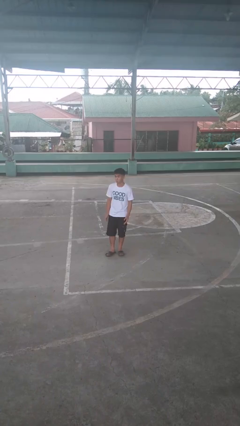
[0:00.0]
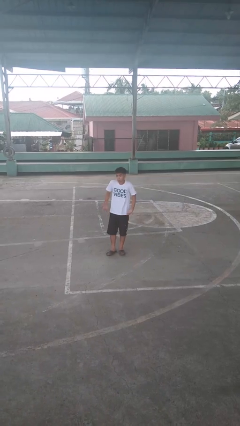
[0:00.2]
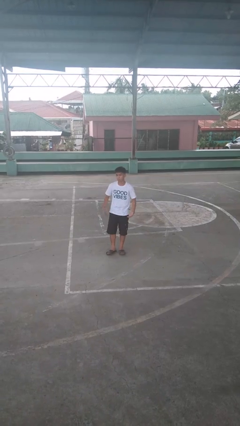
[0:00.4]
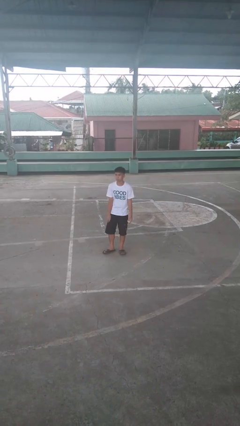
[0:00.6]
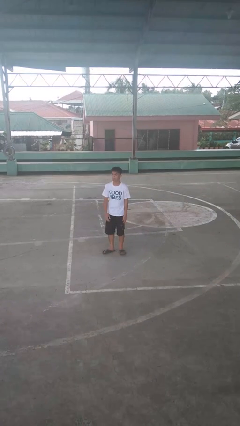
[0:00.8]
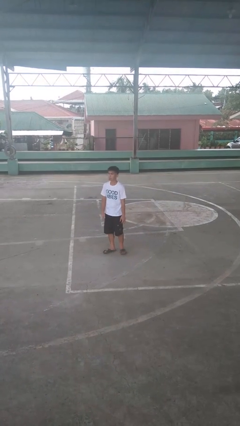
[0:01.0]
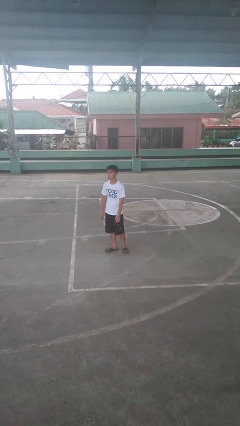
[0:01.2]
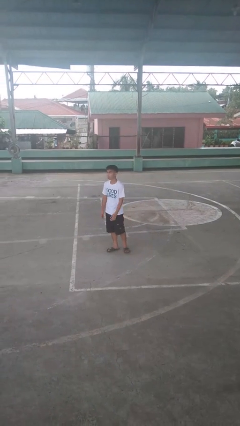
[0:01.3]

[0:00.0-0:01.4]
person shrugs

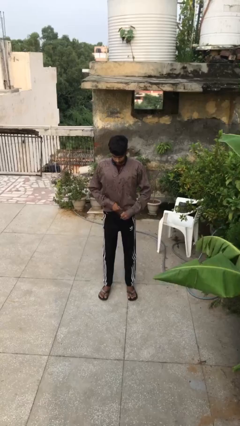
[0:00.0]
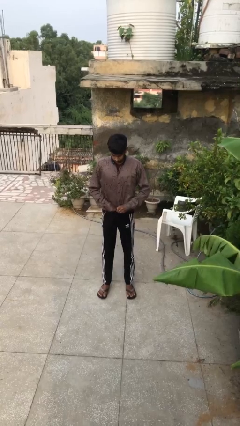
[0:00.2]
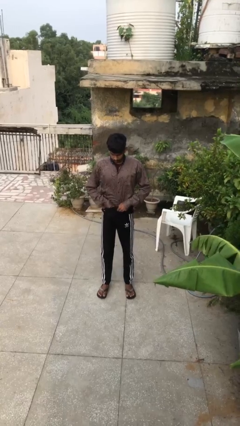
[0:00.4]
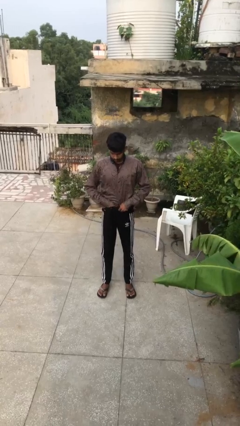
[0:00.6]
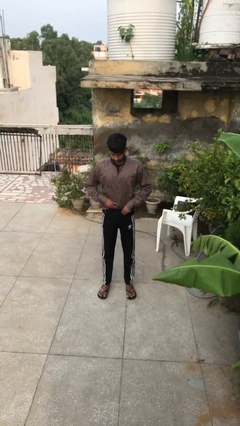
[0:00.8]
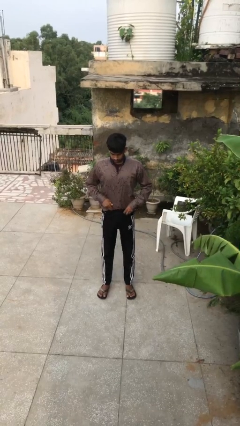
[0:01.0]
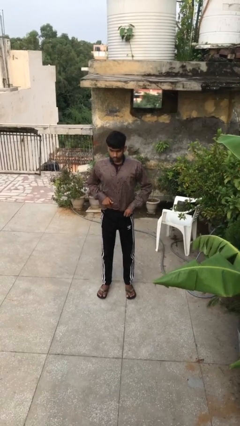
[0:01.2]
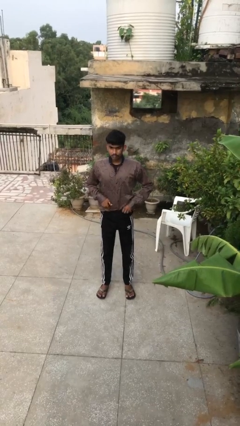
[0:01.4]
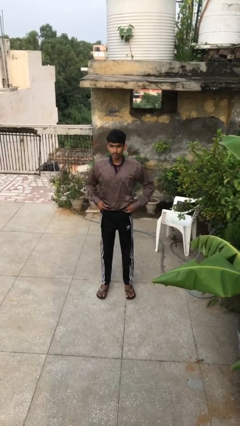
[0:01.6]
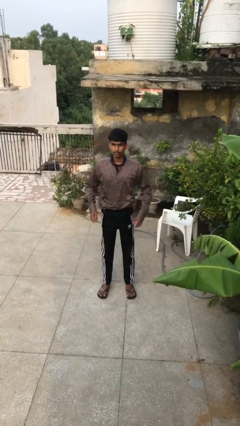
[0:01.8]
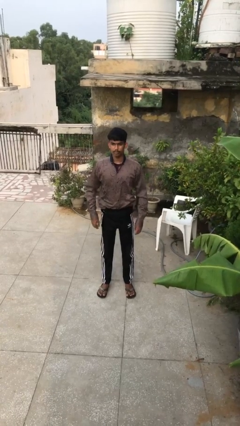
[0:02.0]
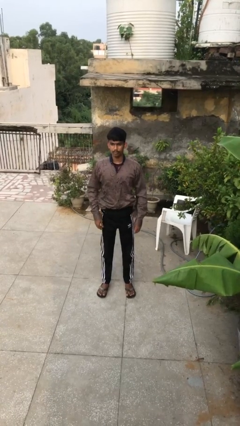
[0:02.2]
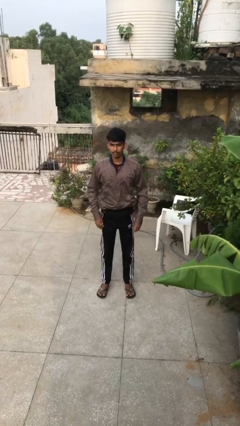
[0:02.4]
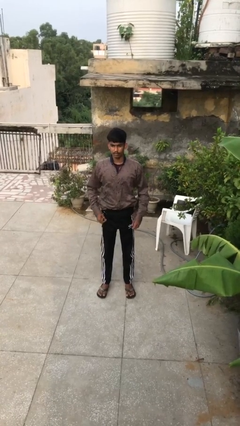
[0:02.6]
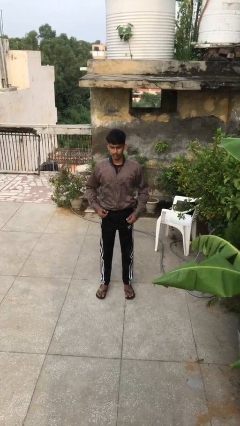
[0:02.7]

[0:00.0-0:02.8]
person tucks in shirt

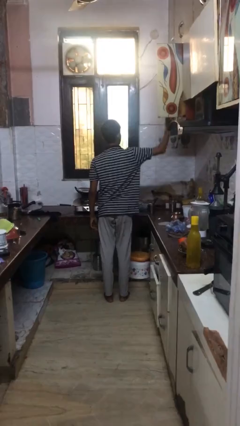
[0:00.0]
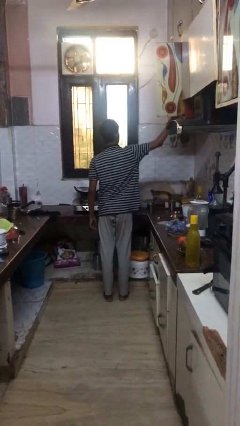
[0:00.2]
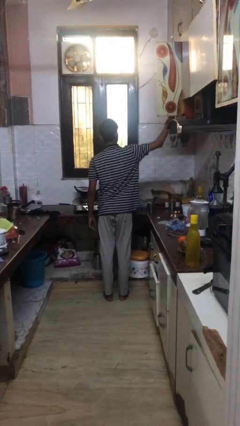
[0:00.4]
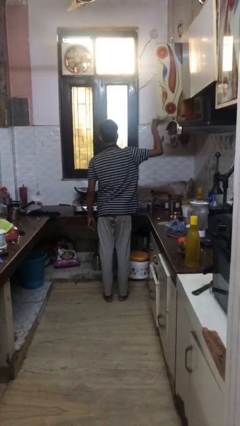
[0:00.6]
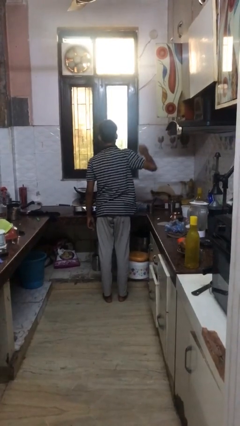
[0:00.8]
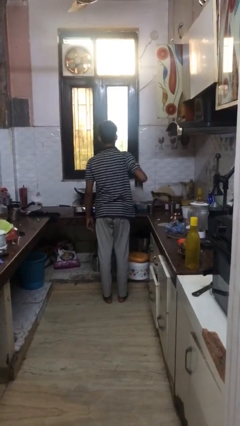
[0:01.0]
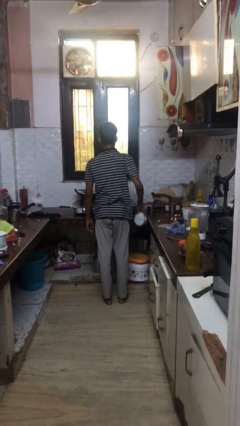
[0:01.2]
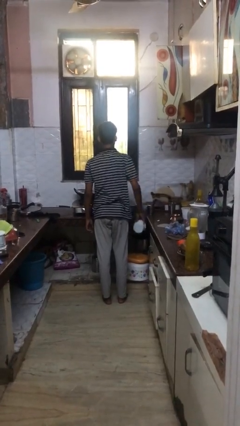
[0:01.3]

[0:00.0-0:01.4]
person puts object in cabinet

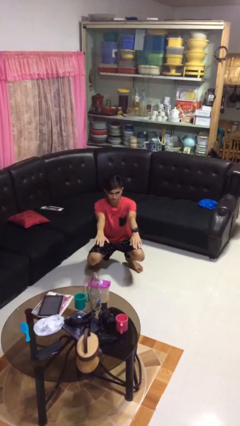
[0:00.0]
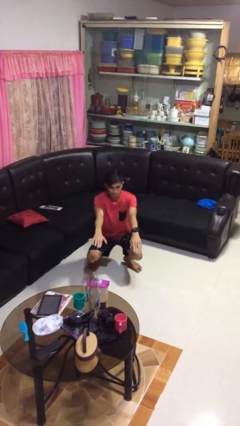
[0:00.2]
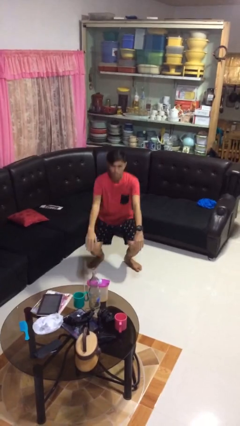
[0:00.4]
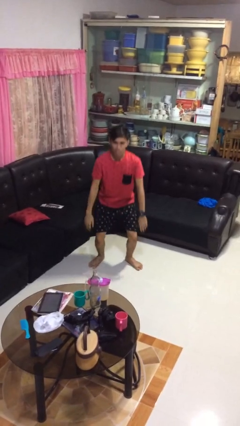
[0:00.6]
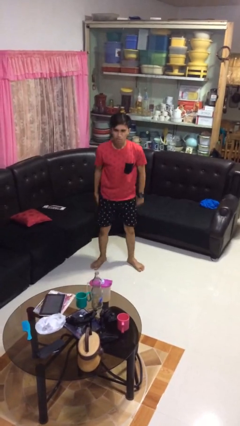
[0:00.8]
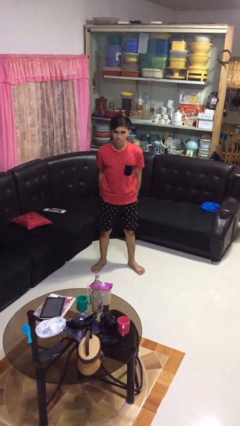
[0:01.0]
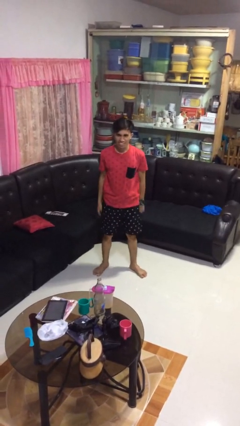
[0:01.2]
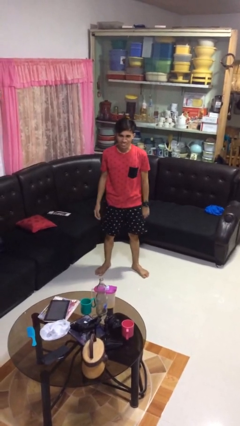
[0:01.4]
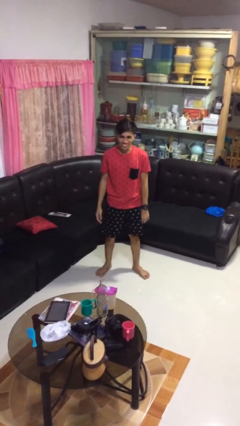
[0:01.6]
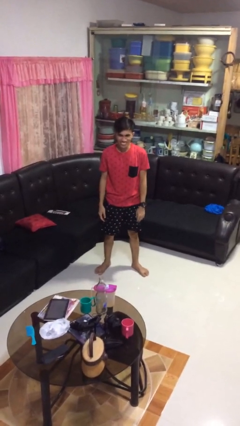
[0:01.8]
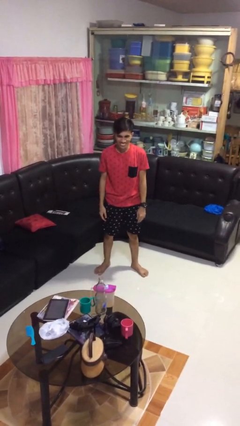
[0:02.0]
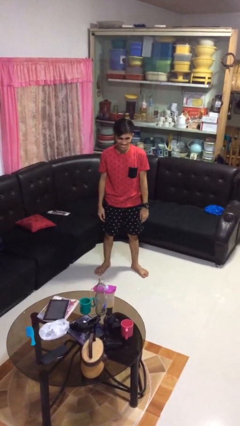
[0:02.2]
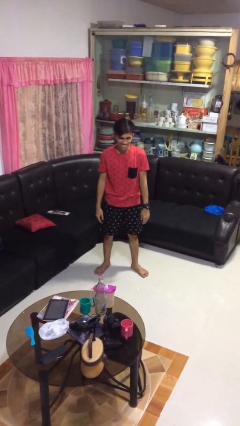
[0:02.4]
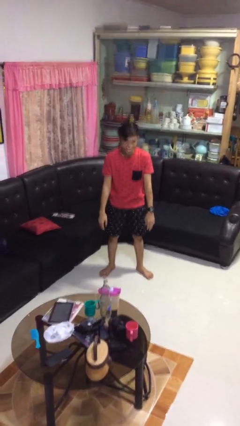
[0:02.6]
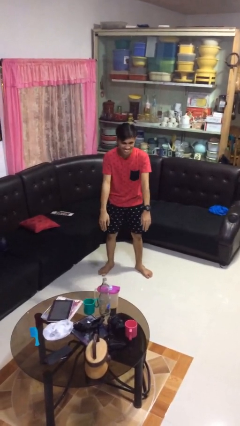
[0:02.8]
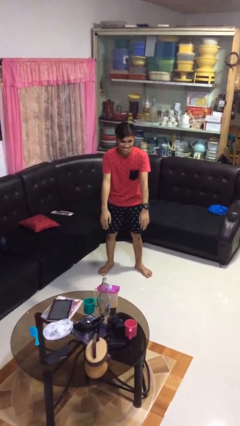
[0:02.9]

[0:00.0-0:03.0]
person stands up

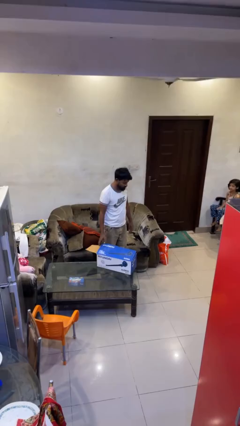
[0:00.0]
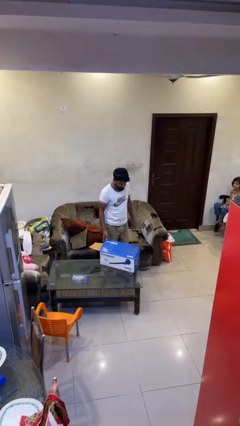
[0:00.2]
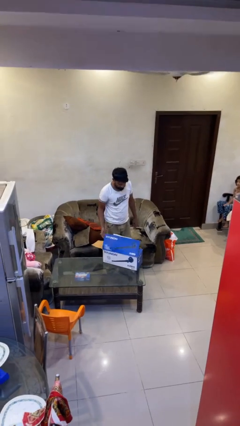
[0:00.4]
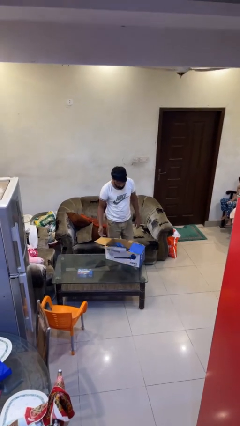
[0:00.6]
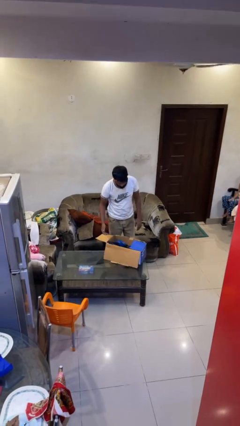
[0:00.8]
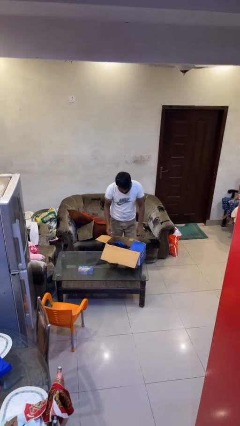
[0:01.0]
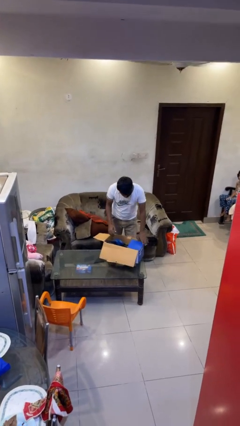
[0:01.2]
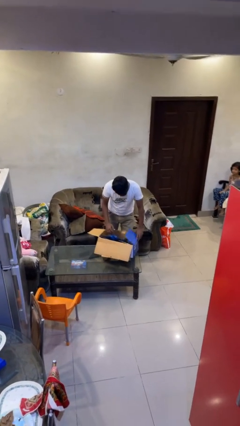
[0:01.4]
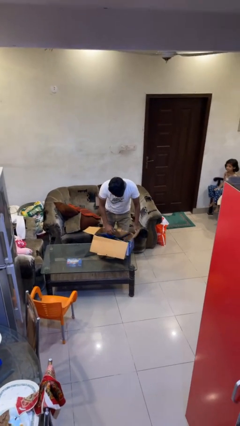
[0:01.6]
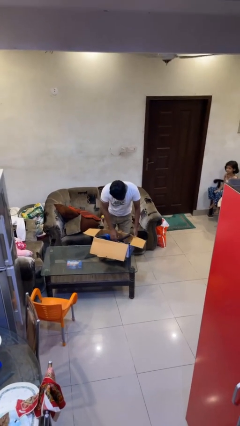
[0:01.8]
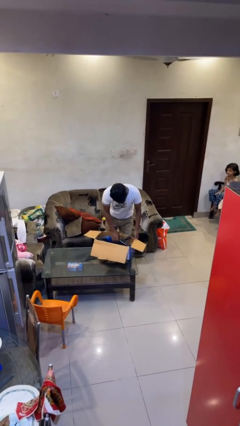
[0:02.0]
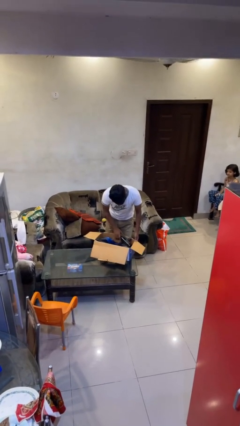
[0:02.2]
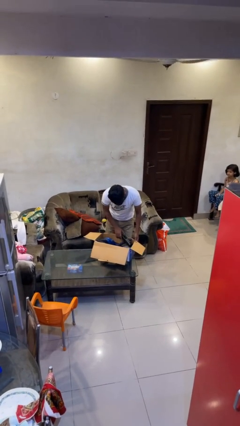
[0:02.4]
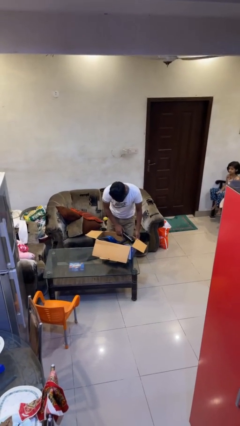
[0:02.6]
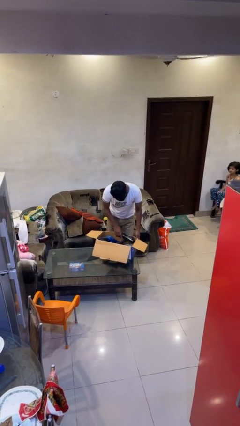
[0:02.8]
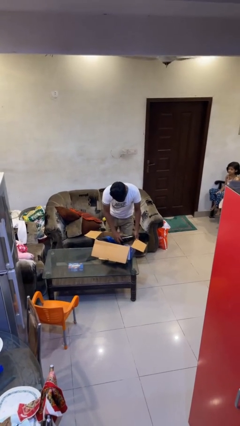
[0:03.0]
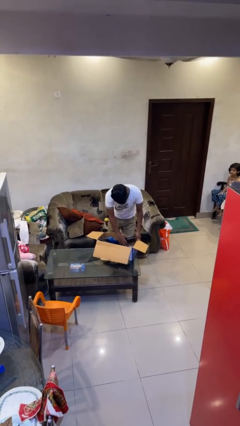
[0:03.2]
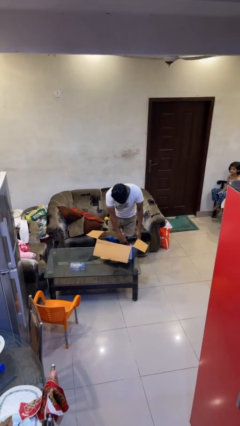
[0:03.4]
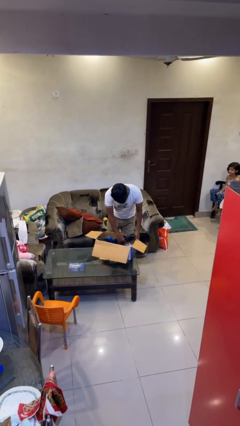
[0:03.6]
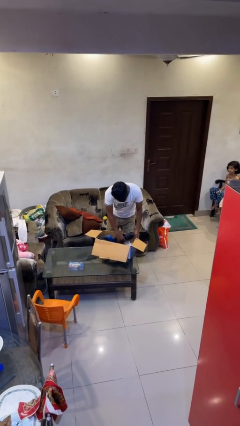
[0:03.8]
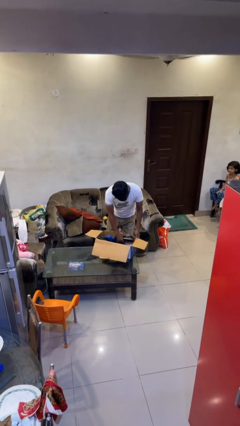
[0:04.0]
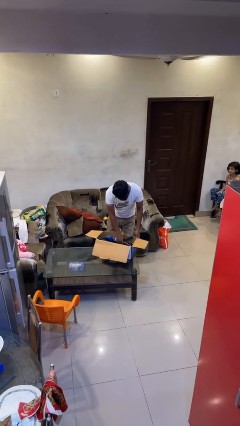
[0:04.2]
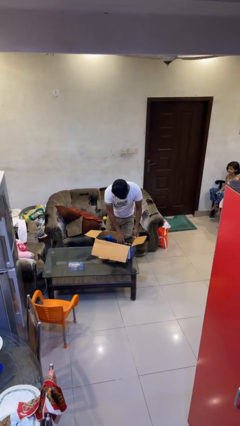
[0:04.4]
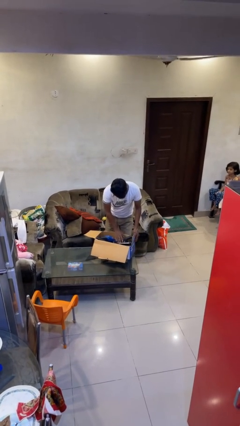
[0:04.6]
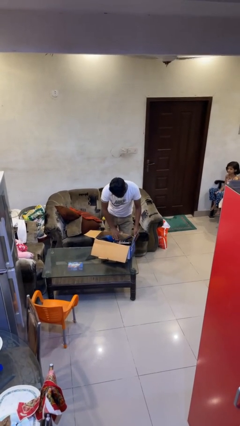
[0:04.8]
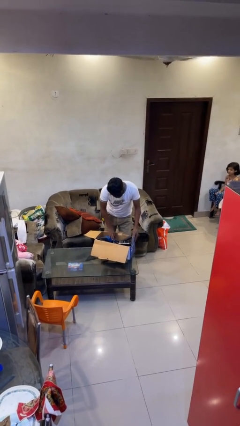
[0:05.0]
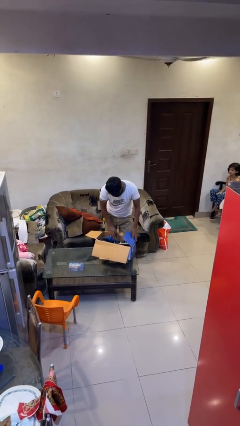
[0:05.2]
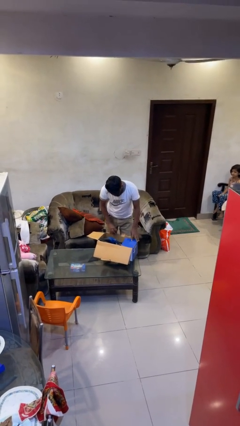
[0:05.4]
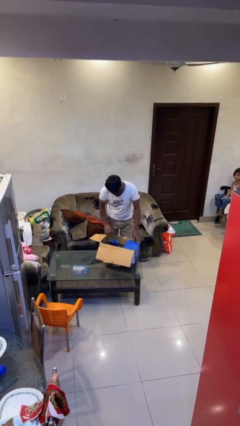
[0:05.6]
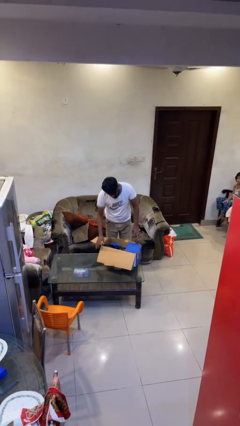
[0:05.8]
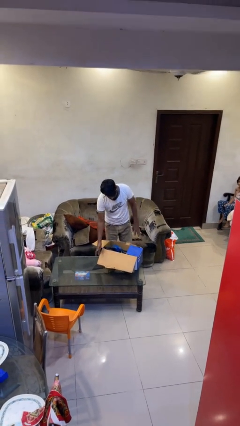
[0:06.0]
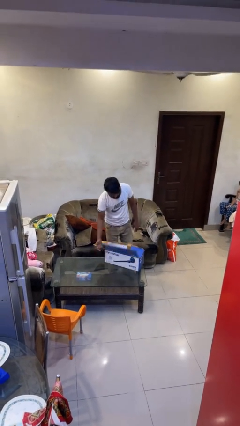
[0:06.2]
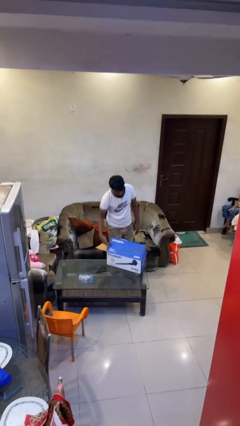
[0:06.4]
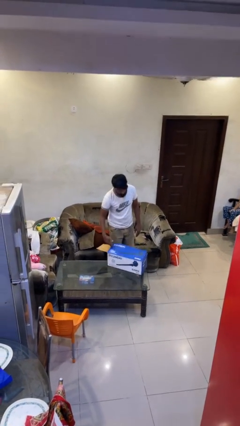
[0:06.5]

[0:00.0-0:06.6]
person searches in box

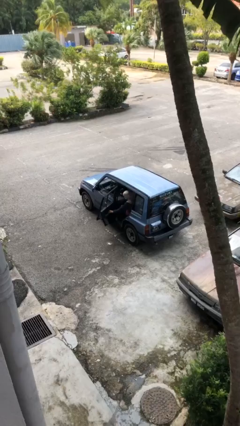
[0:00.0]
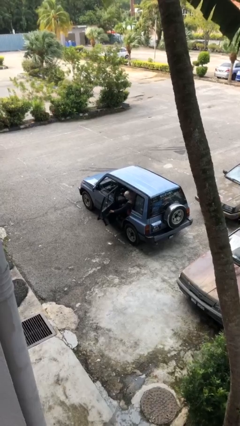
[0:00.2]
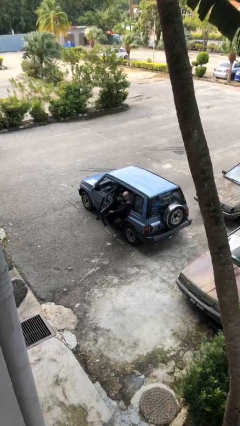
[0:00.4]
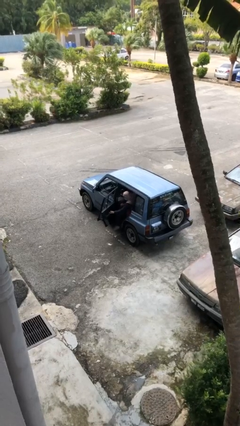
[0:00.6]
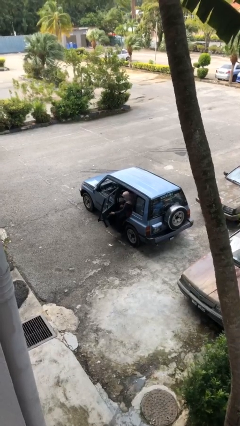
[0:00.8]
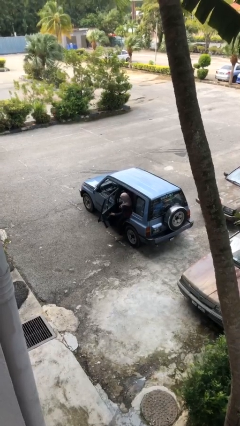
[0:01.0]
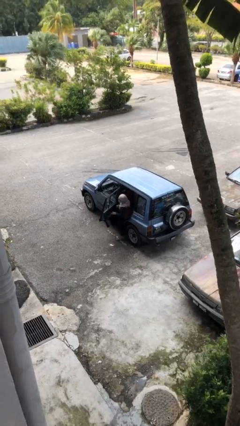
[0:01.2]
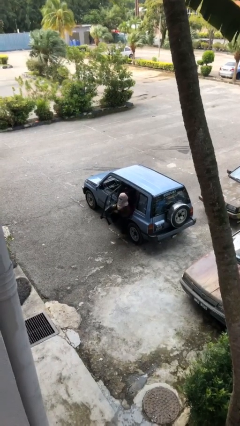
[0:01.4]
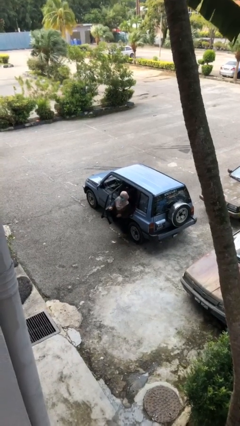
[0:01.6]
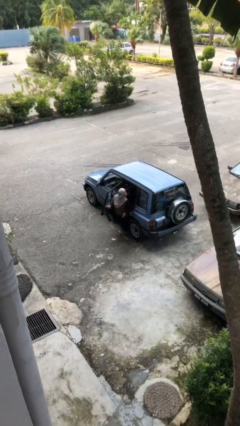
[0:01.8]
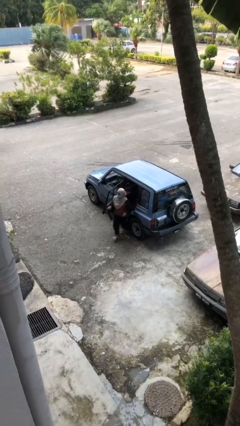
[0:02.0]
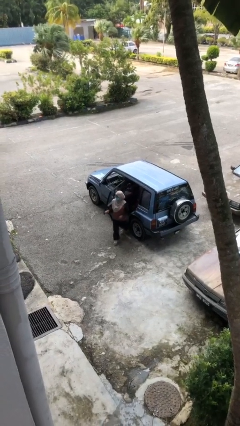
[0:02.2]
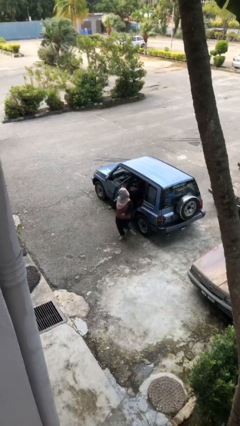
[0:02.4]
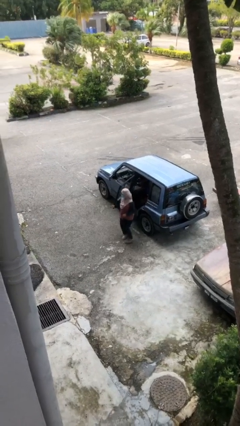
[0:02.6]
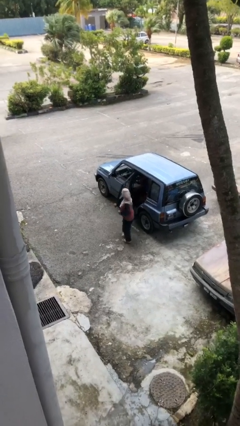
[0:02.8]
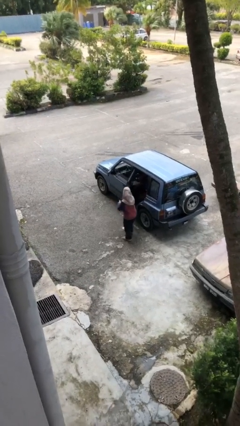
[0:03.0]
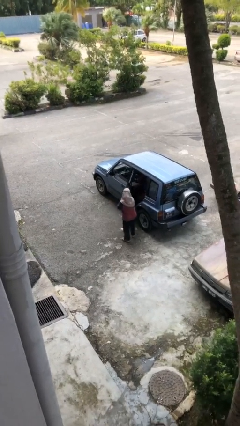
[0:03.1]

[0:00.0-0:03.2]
person exits car
